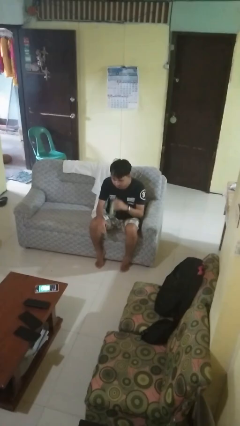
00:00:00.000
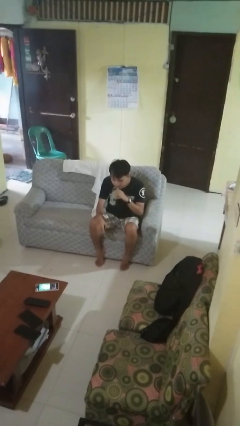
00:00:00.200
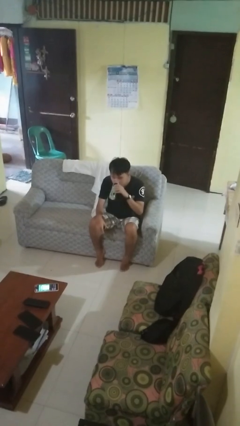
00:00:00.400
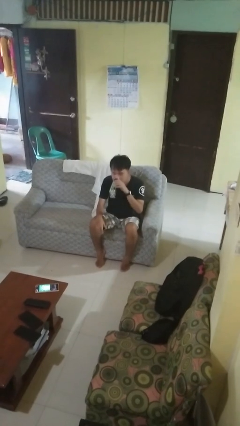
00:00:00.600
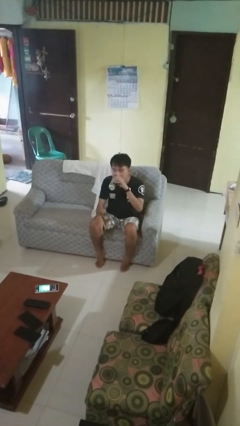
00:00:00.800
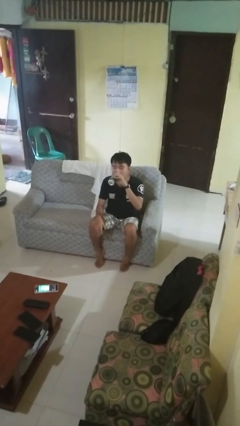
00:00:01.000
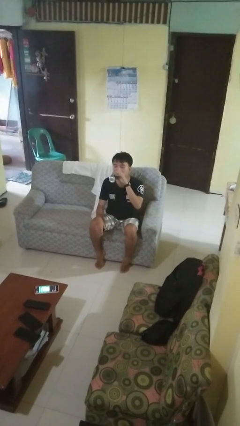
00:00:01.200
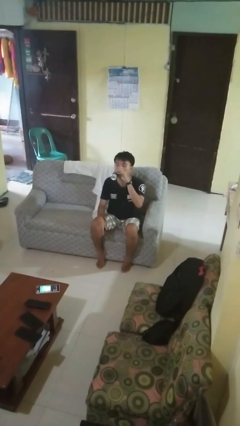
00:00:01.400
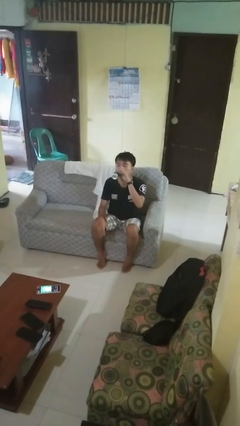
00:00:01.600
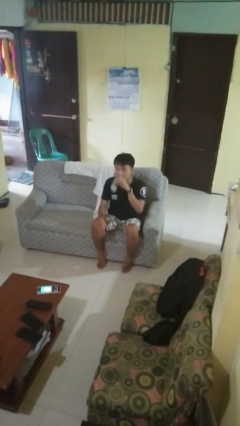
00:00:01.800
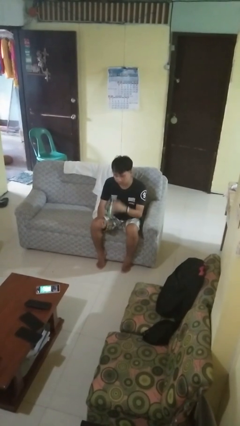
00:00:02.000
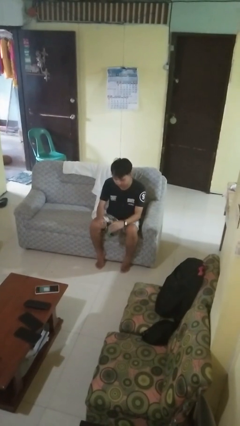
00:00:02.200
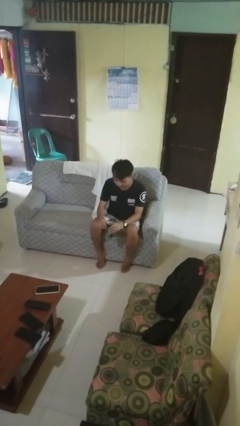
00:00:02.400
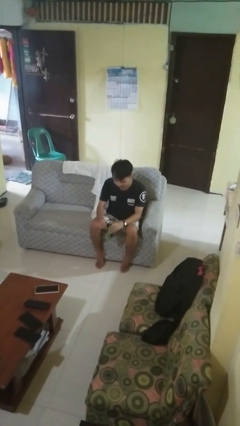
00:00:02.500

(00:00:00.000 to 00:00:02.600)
person drinks from beverage can

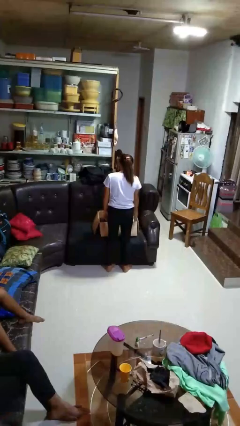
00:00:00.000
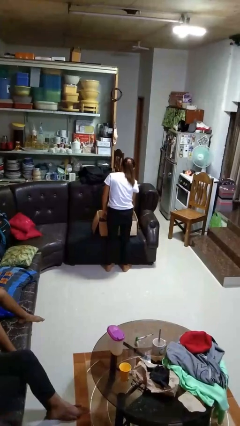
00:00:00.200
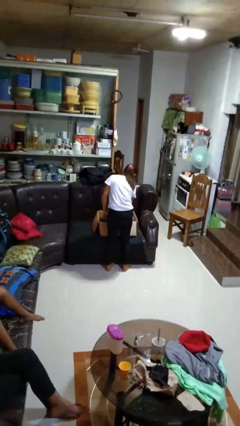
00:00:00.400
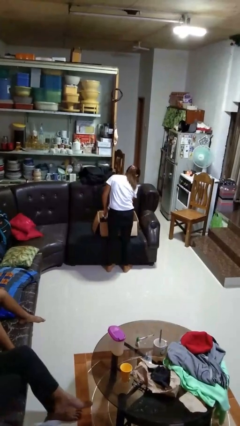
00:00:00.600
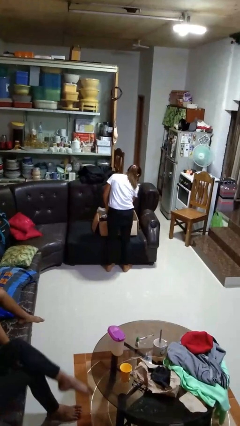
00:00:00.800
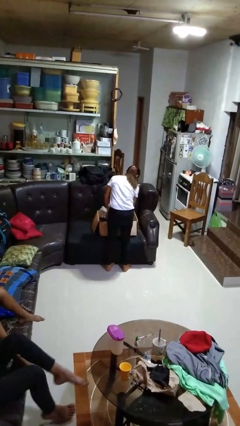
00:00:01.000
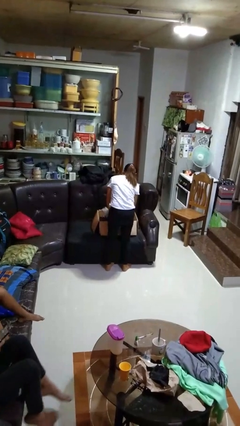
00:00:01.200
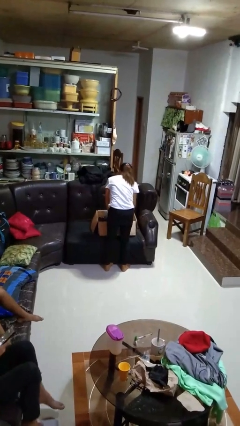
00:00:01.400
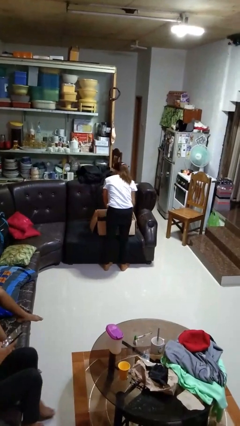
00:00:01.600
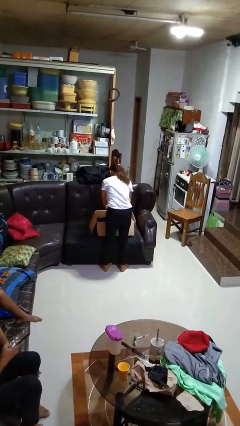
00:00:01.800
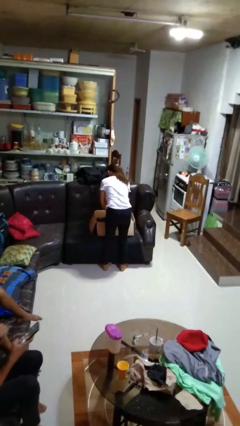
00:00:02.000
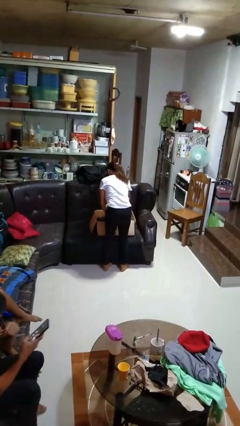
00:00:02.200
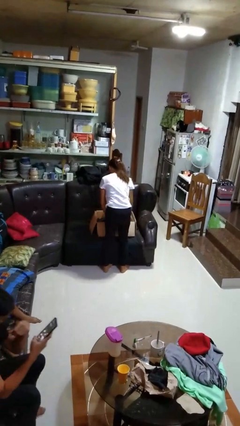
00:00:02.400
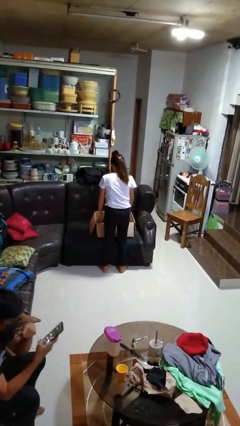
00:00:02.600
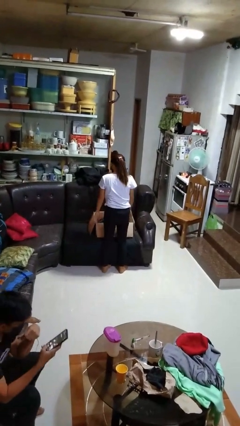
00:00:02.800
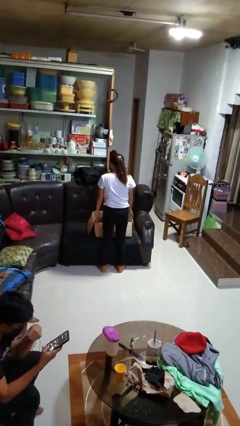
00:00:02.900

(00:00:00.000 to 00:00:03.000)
person searches in box

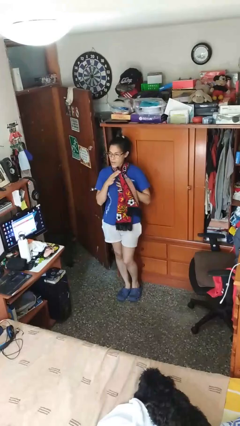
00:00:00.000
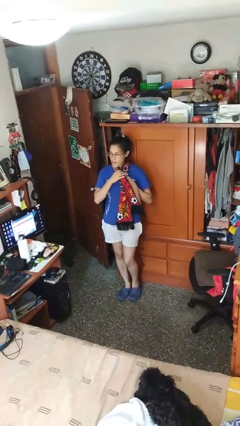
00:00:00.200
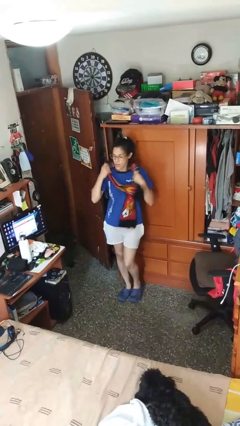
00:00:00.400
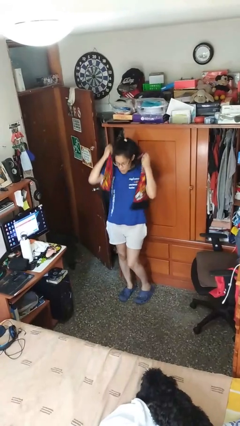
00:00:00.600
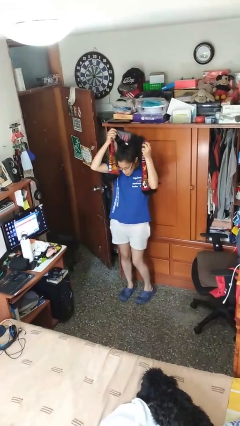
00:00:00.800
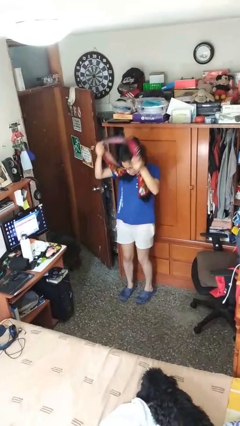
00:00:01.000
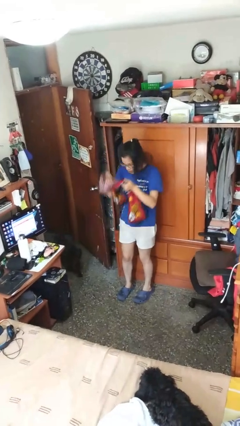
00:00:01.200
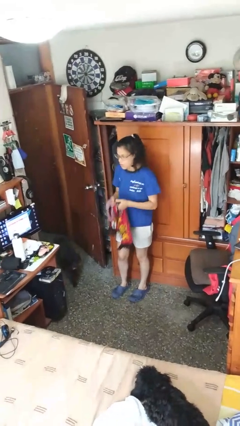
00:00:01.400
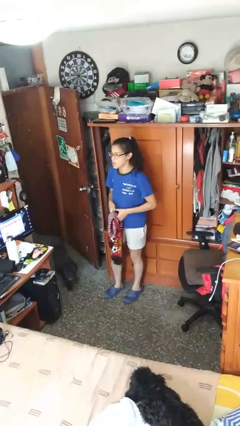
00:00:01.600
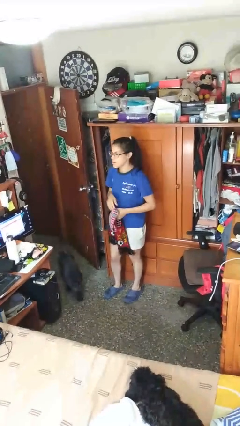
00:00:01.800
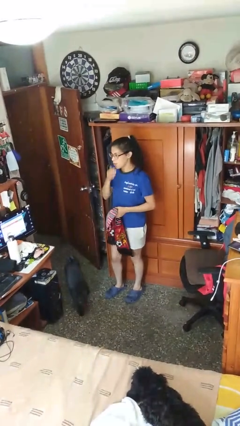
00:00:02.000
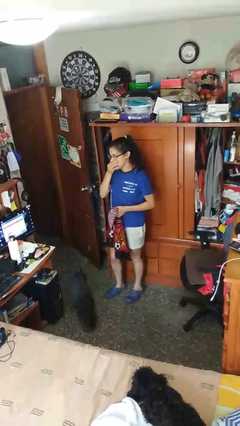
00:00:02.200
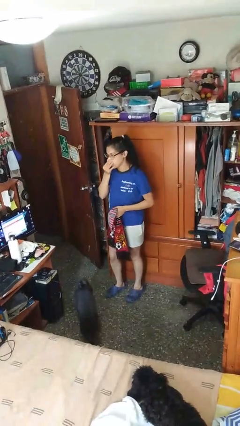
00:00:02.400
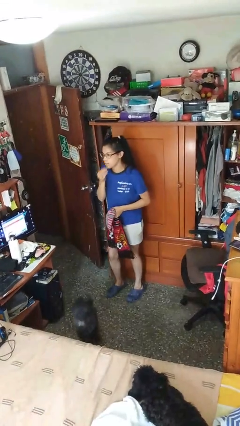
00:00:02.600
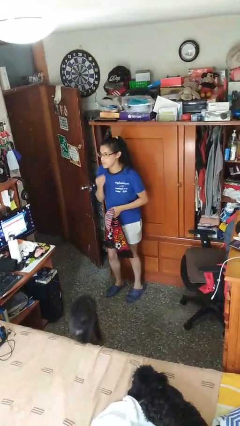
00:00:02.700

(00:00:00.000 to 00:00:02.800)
person takes off scarf

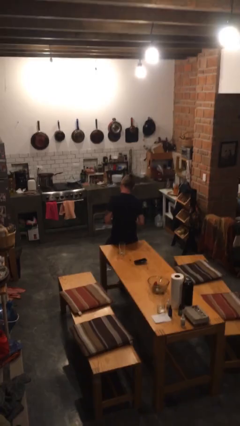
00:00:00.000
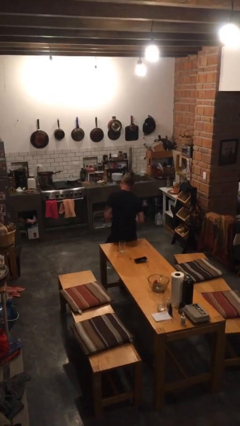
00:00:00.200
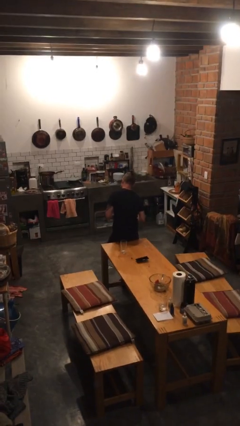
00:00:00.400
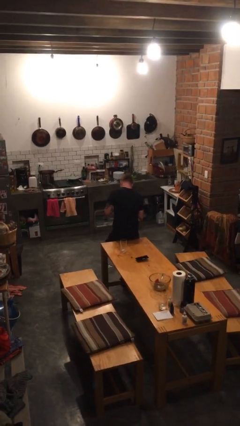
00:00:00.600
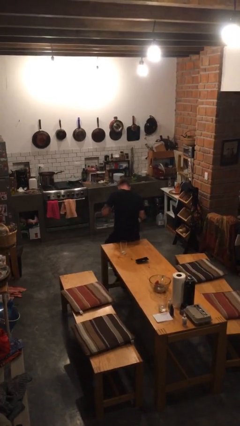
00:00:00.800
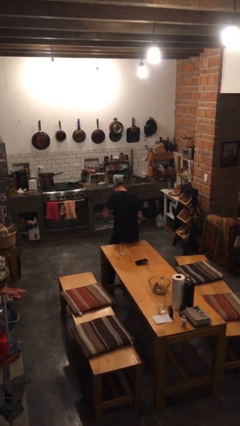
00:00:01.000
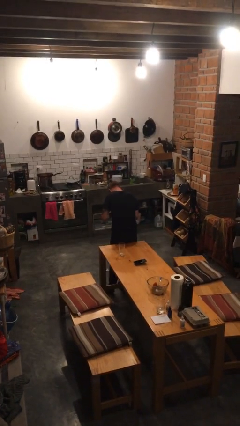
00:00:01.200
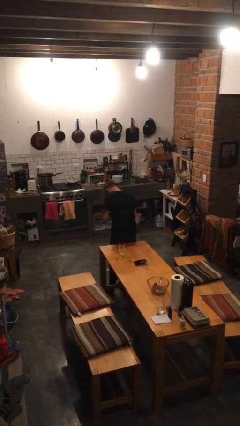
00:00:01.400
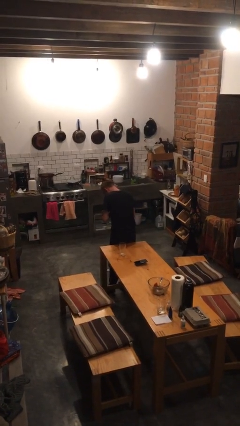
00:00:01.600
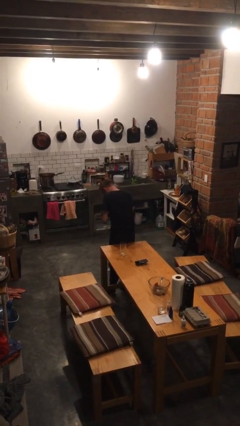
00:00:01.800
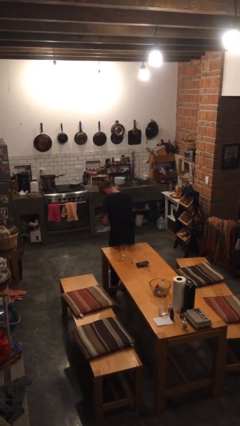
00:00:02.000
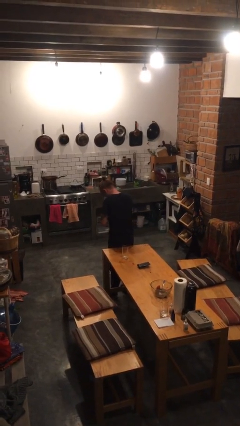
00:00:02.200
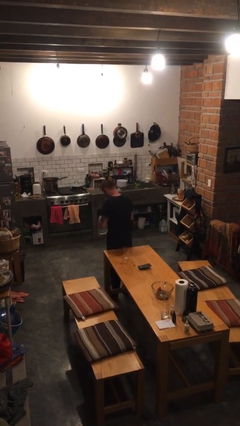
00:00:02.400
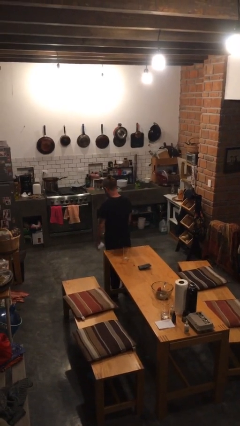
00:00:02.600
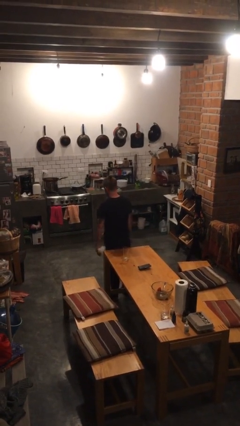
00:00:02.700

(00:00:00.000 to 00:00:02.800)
person blows nose

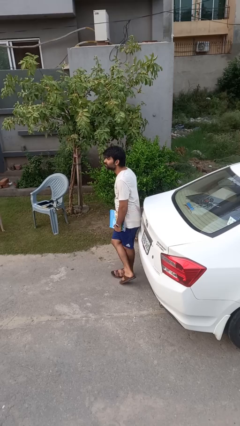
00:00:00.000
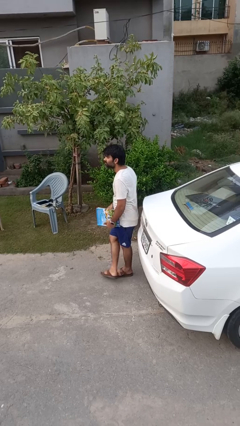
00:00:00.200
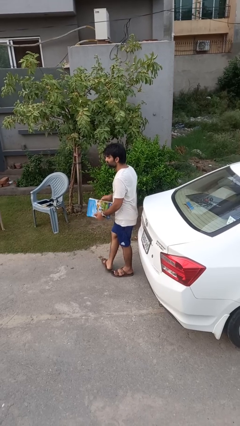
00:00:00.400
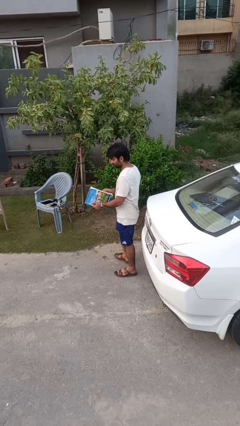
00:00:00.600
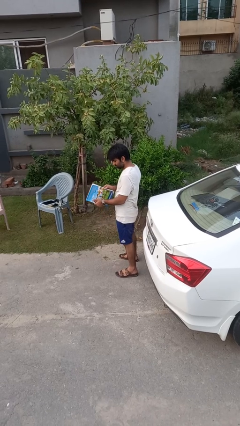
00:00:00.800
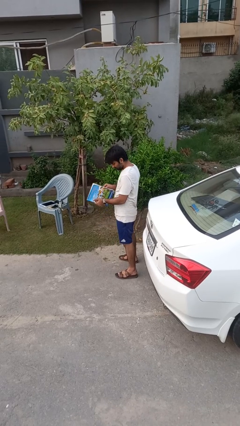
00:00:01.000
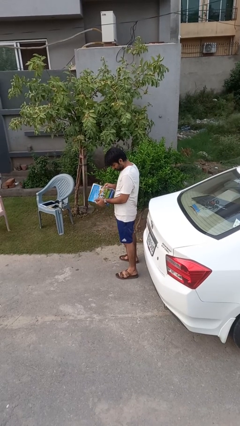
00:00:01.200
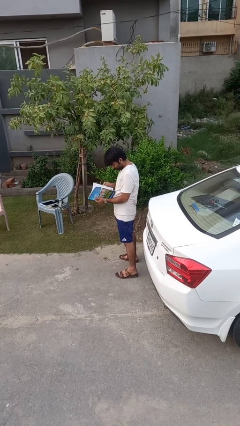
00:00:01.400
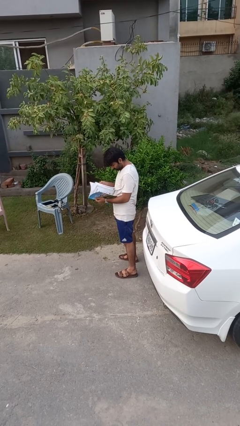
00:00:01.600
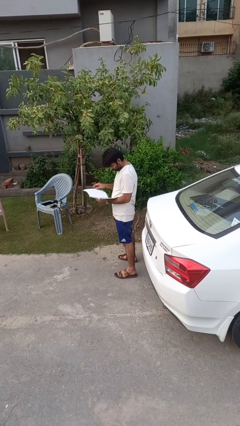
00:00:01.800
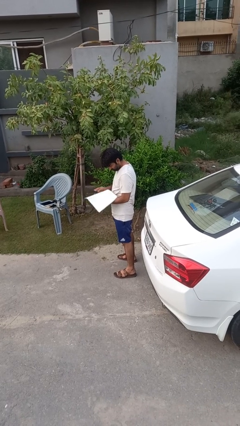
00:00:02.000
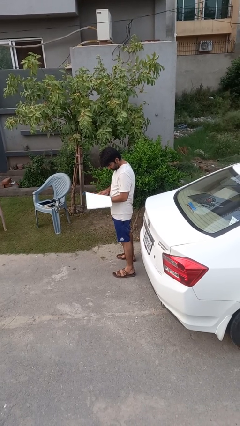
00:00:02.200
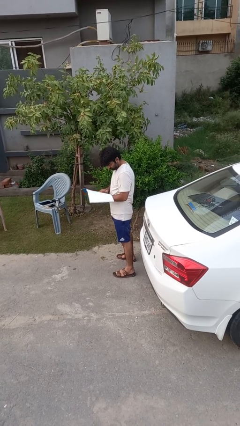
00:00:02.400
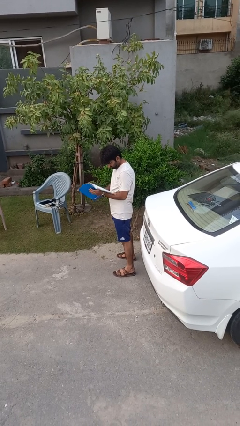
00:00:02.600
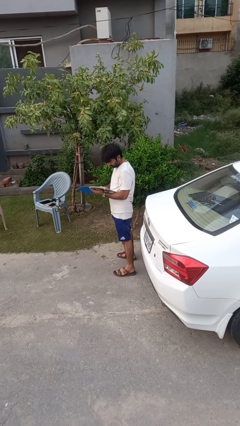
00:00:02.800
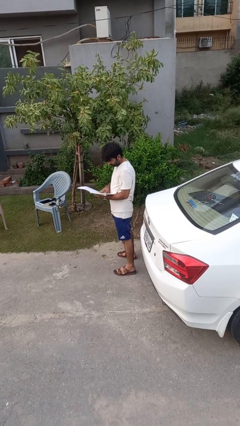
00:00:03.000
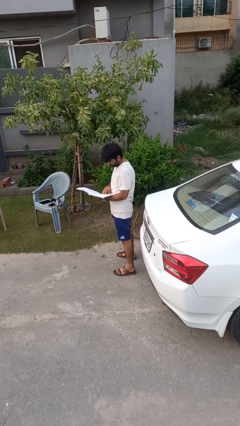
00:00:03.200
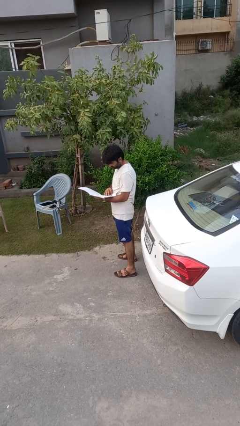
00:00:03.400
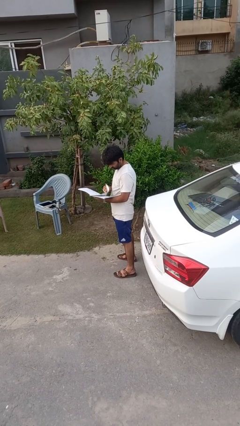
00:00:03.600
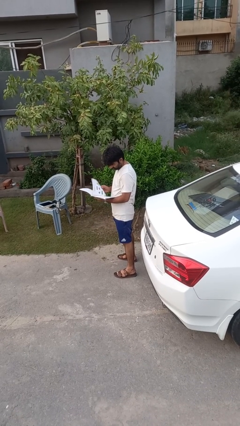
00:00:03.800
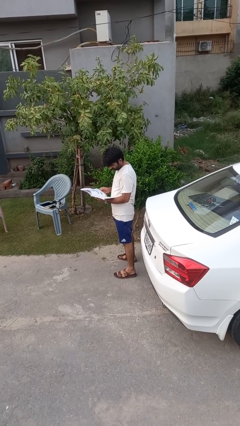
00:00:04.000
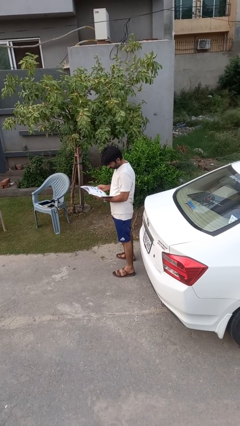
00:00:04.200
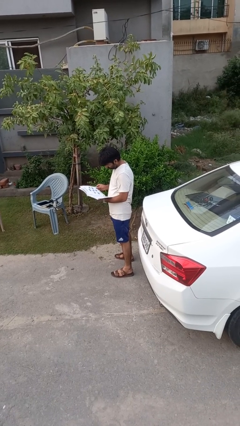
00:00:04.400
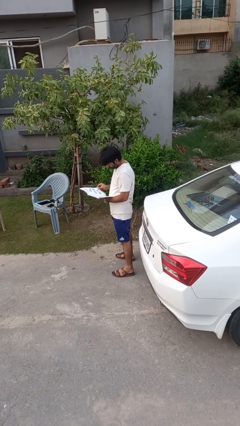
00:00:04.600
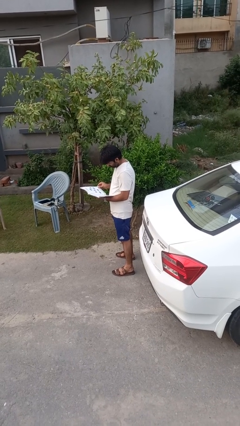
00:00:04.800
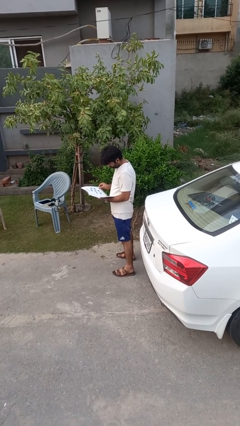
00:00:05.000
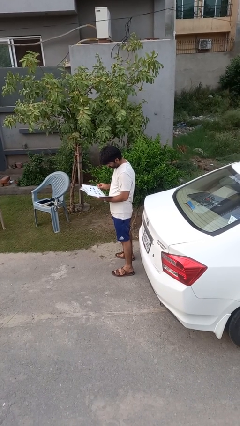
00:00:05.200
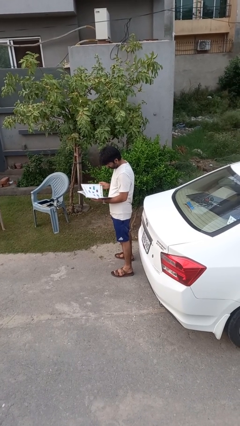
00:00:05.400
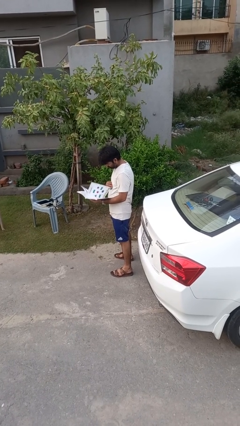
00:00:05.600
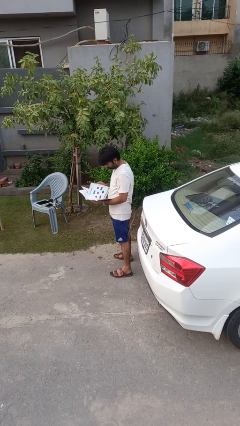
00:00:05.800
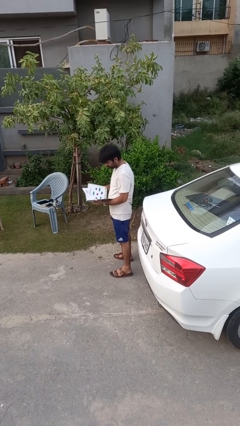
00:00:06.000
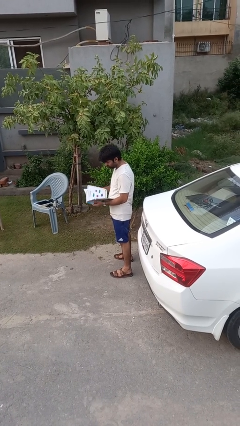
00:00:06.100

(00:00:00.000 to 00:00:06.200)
person reads book
